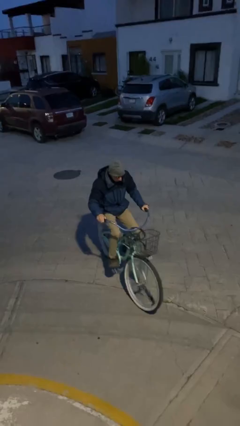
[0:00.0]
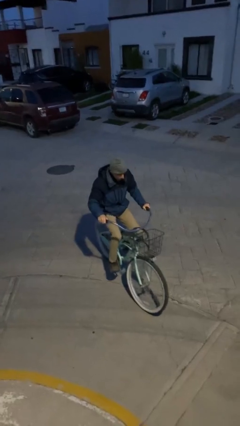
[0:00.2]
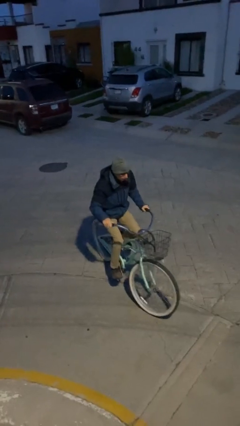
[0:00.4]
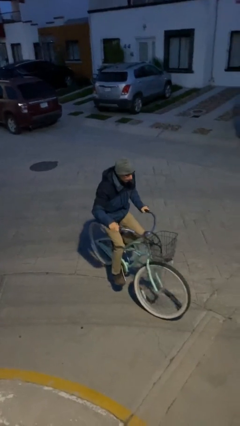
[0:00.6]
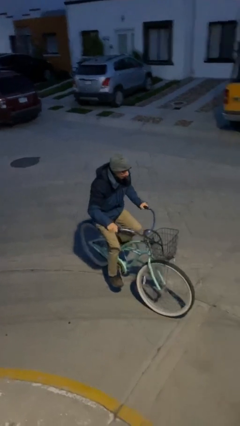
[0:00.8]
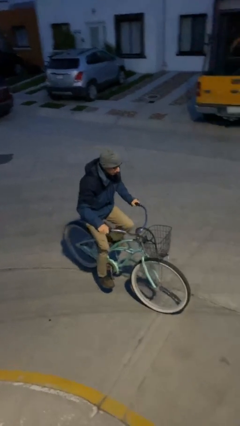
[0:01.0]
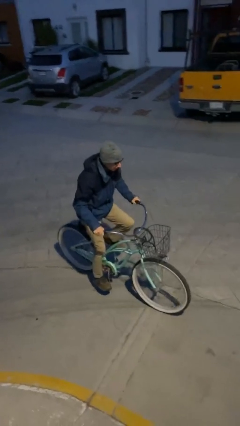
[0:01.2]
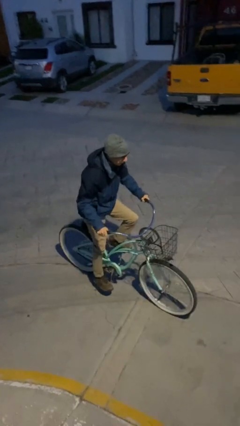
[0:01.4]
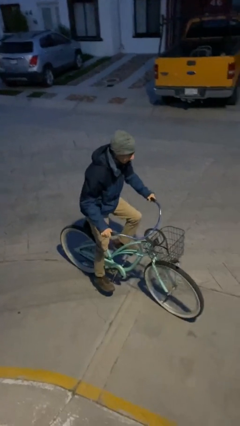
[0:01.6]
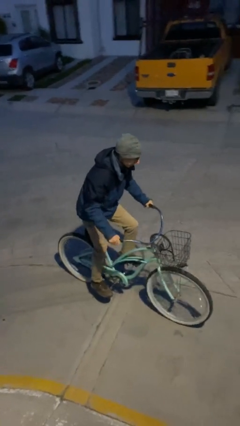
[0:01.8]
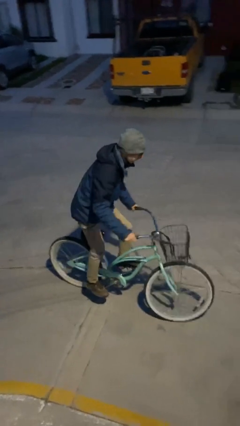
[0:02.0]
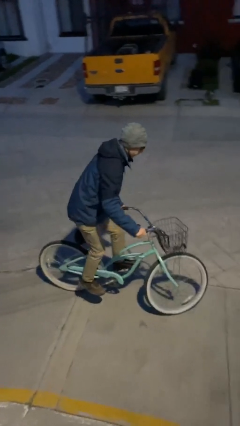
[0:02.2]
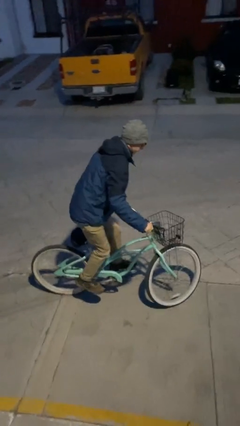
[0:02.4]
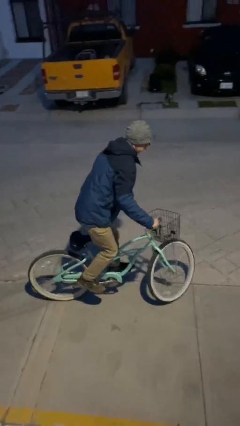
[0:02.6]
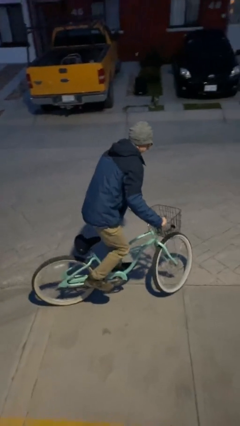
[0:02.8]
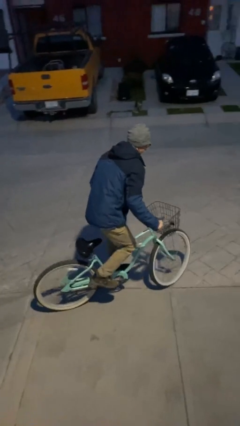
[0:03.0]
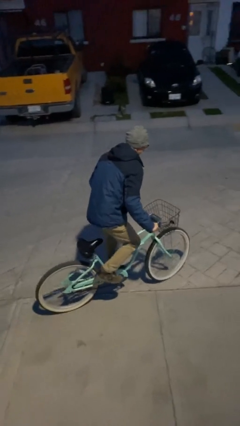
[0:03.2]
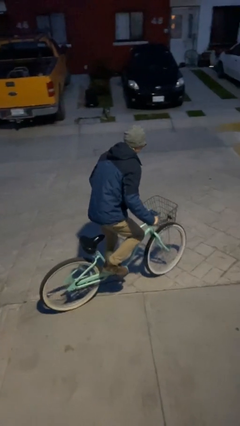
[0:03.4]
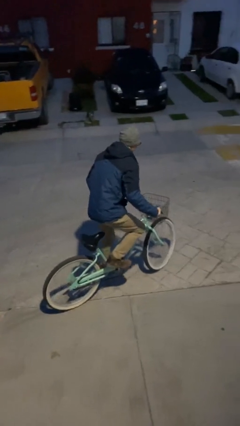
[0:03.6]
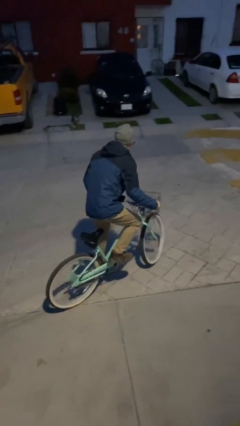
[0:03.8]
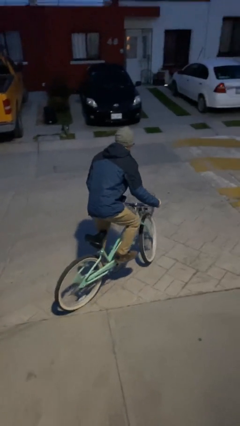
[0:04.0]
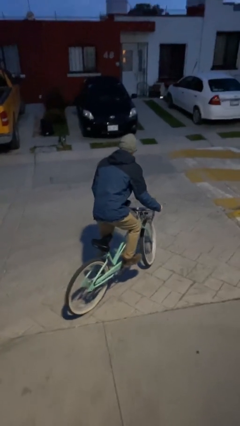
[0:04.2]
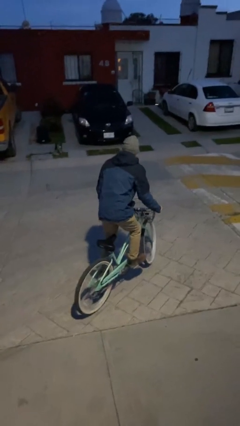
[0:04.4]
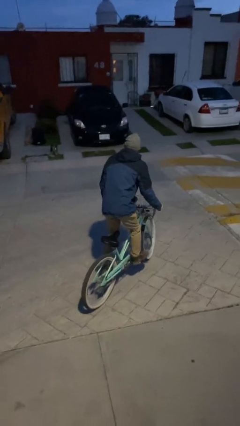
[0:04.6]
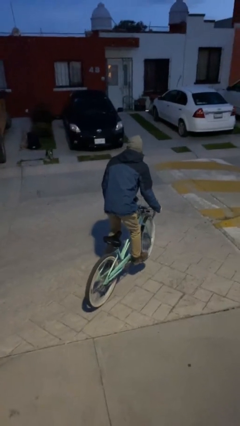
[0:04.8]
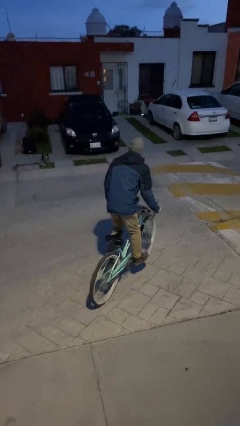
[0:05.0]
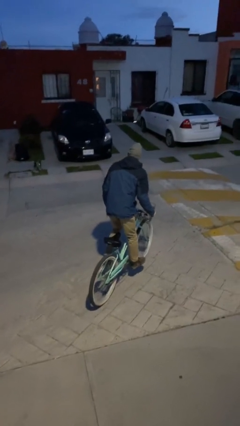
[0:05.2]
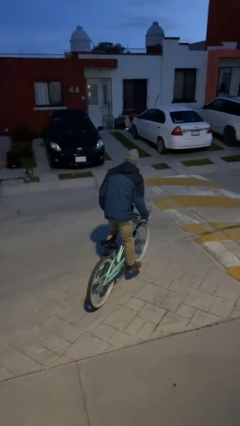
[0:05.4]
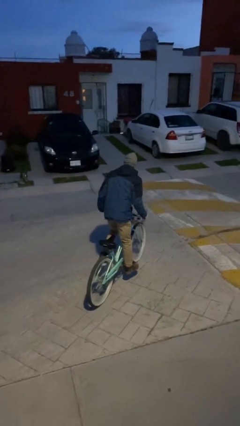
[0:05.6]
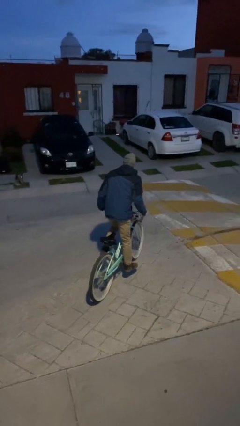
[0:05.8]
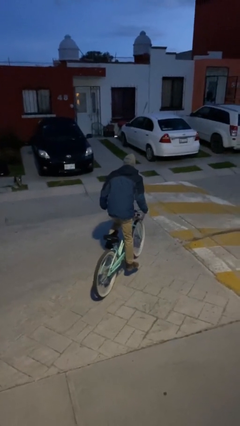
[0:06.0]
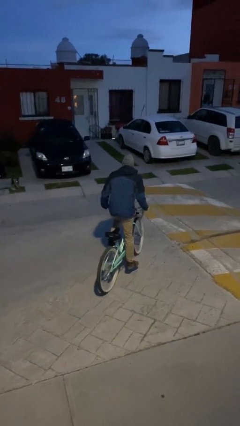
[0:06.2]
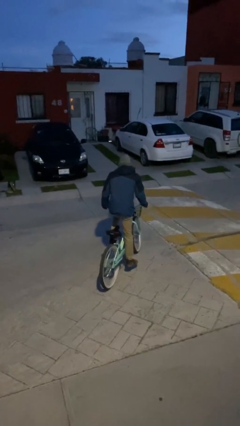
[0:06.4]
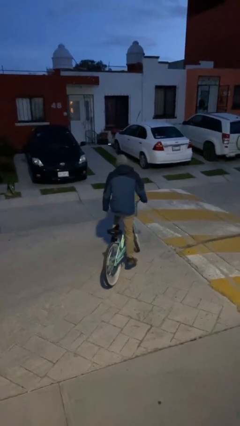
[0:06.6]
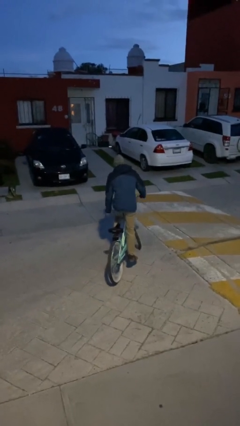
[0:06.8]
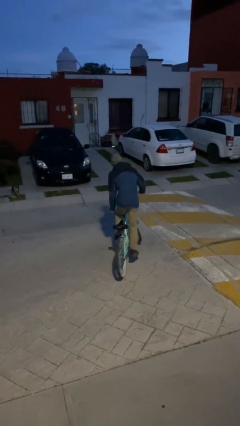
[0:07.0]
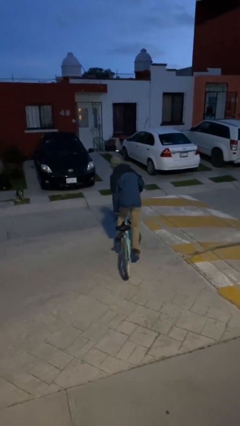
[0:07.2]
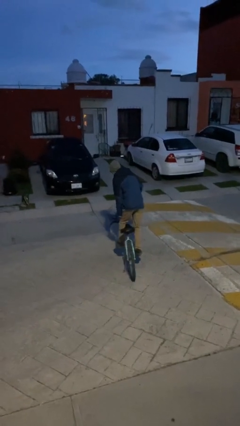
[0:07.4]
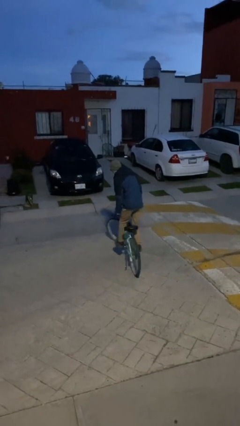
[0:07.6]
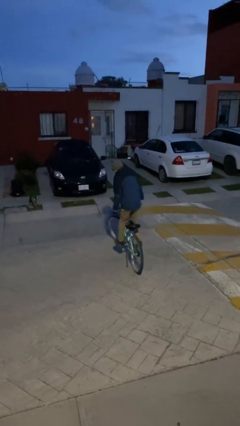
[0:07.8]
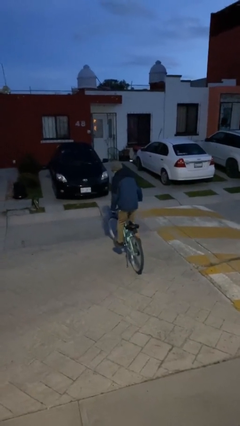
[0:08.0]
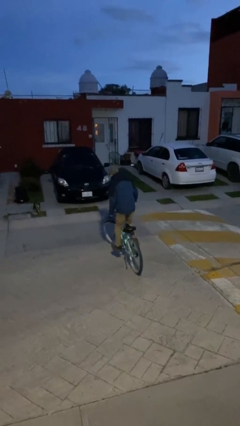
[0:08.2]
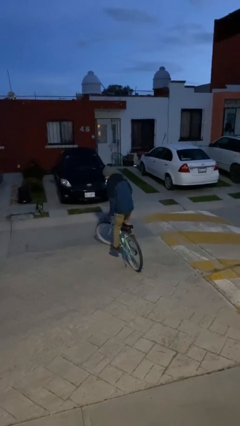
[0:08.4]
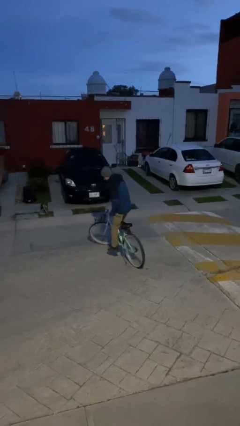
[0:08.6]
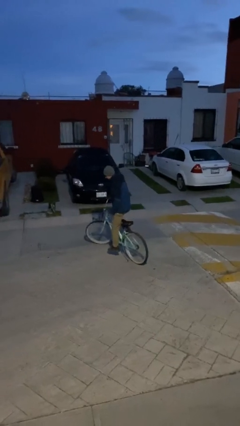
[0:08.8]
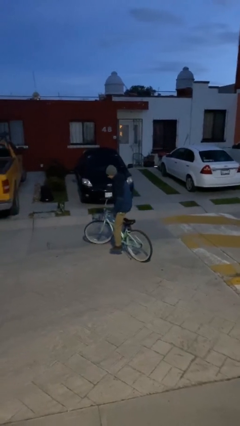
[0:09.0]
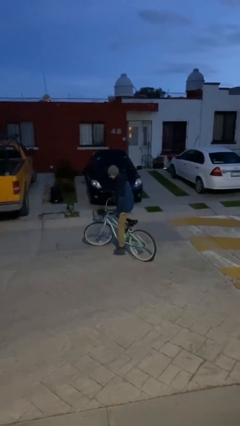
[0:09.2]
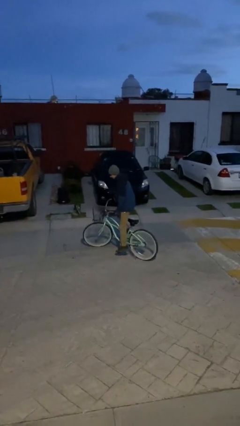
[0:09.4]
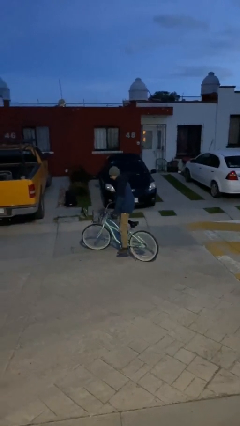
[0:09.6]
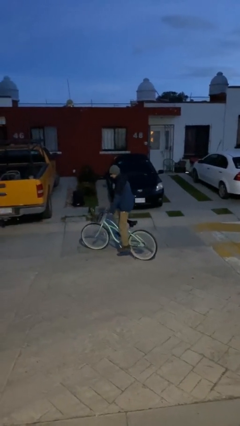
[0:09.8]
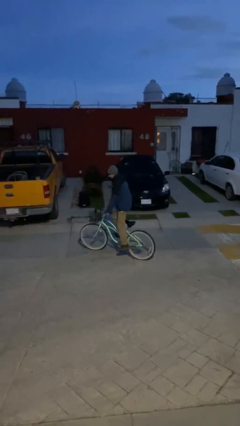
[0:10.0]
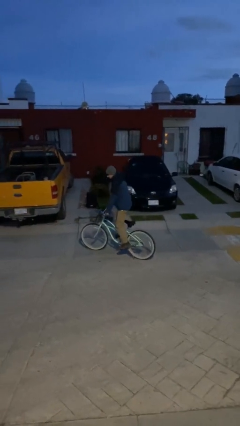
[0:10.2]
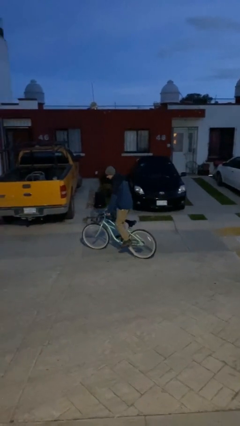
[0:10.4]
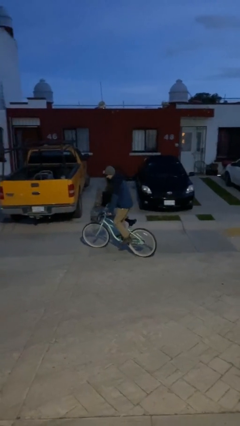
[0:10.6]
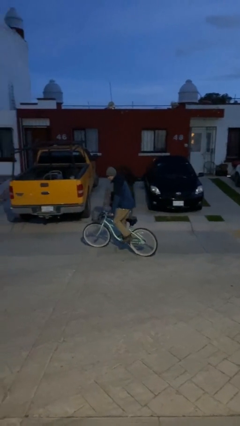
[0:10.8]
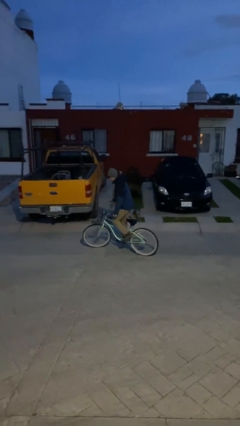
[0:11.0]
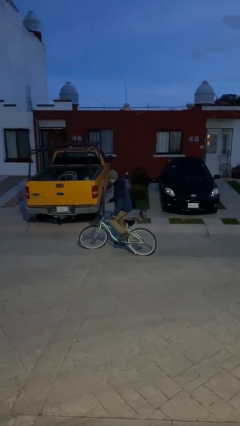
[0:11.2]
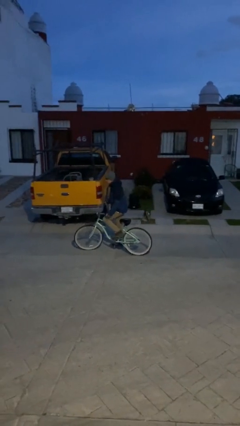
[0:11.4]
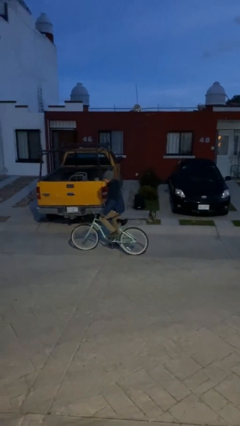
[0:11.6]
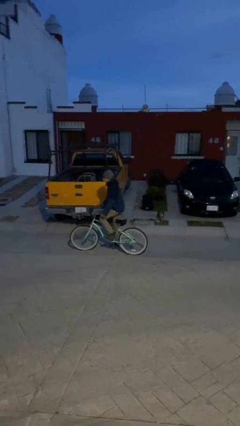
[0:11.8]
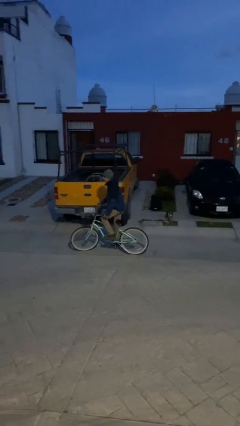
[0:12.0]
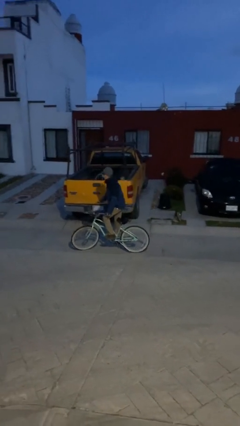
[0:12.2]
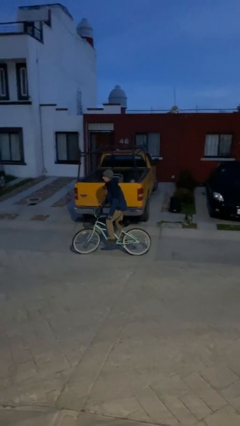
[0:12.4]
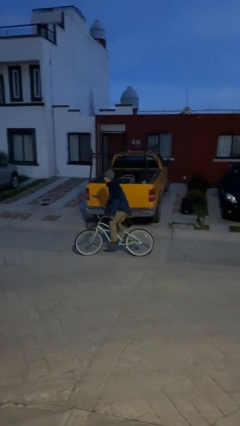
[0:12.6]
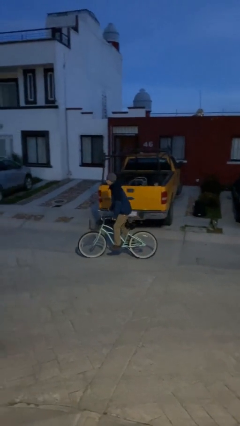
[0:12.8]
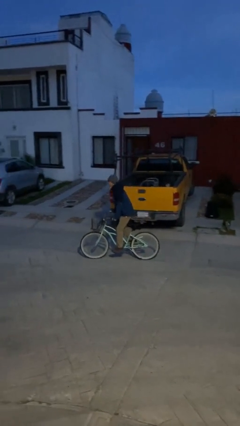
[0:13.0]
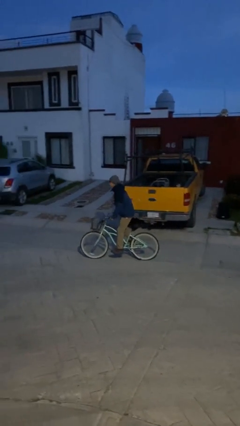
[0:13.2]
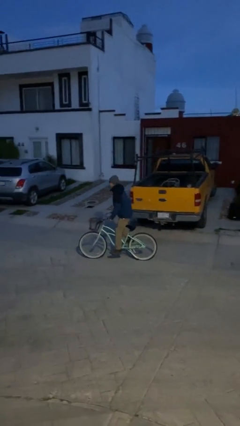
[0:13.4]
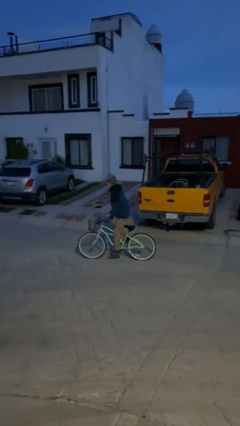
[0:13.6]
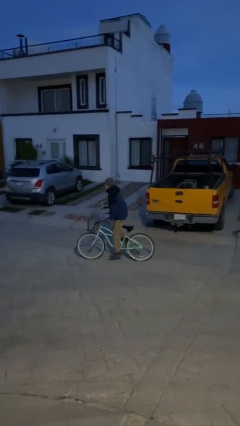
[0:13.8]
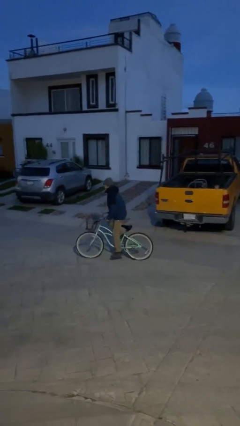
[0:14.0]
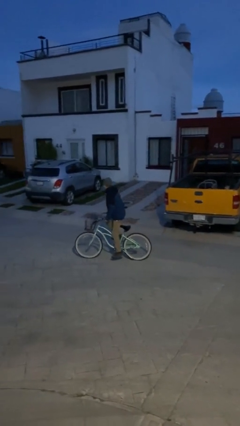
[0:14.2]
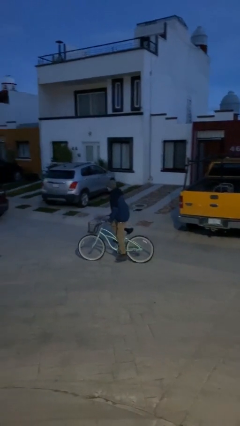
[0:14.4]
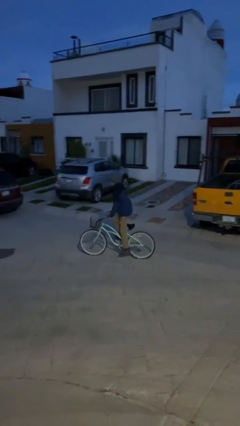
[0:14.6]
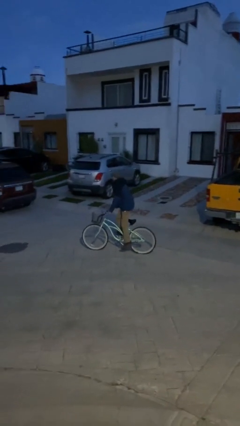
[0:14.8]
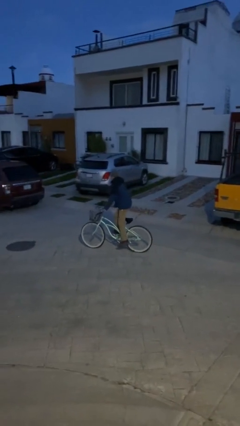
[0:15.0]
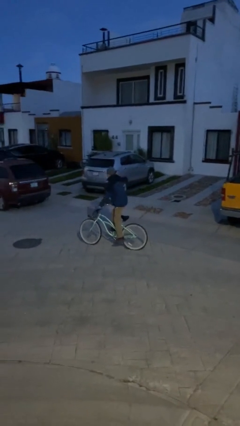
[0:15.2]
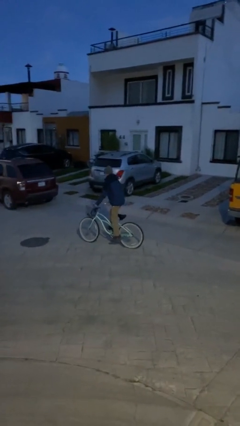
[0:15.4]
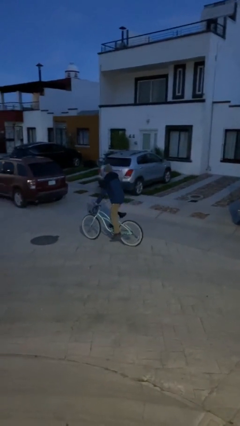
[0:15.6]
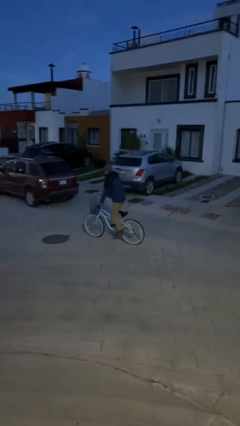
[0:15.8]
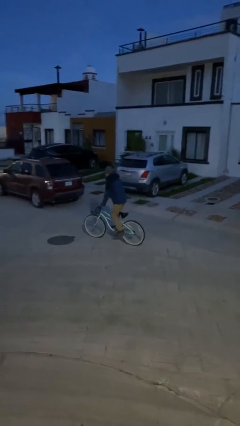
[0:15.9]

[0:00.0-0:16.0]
person rides bicycle

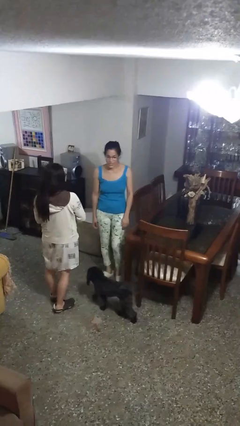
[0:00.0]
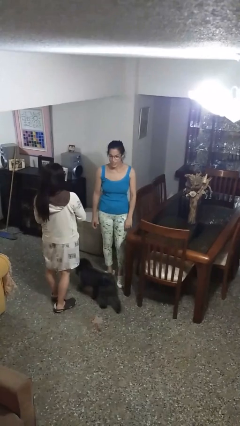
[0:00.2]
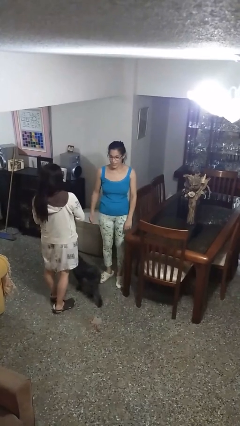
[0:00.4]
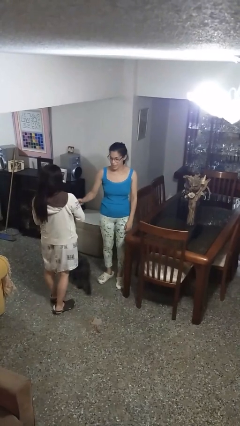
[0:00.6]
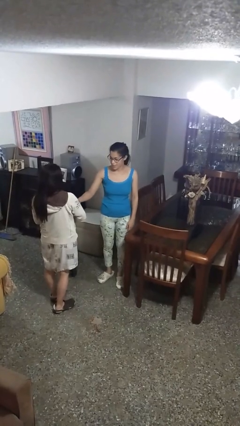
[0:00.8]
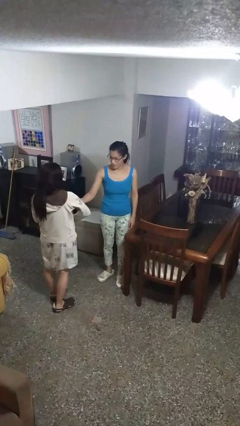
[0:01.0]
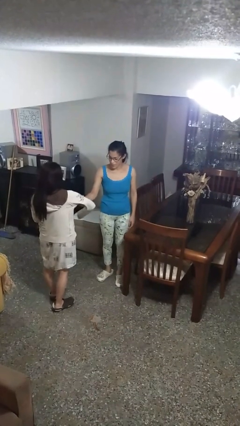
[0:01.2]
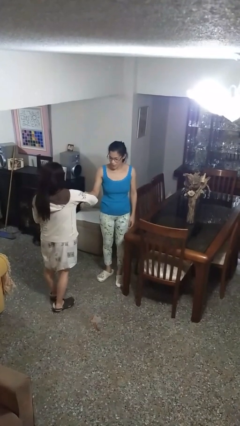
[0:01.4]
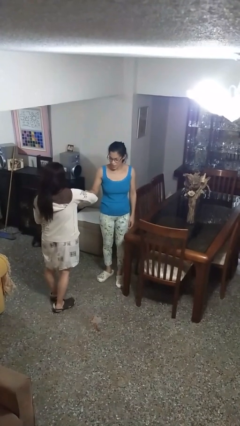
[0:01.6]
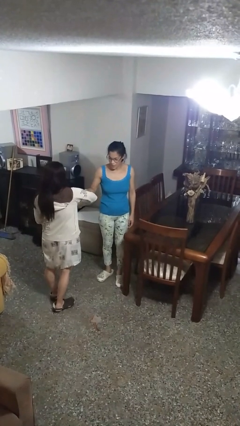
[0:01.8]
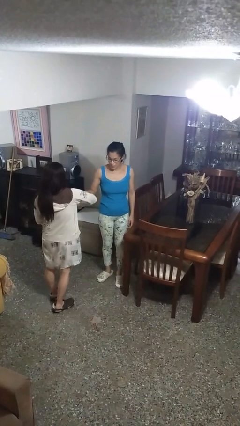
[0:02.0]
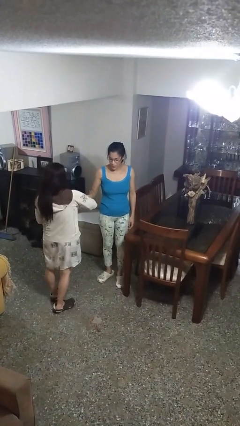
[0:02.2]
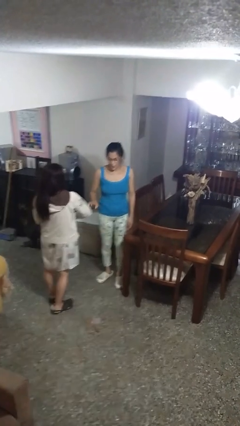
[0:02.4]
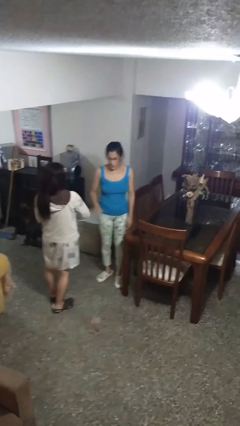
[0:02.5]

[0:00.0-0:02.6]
person grabs person by bicep
